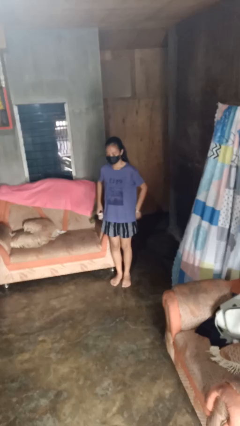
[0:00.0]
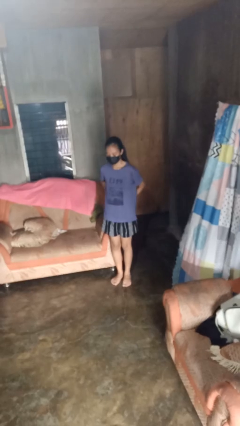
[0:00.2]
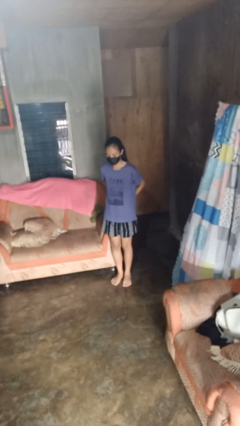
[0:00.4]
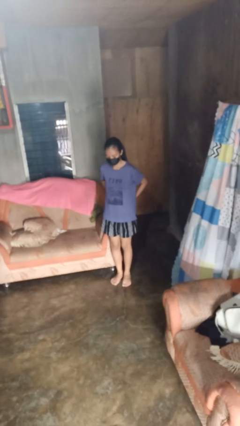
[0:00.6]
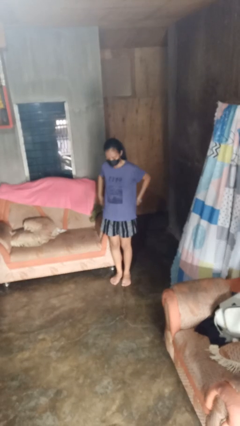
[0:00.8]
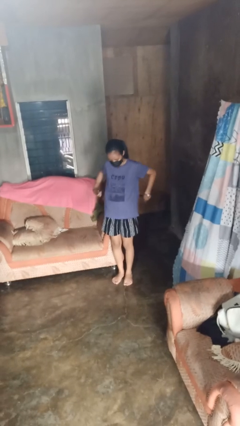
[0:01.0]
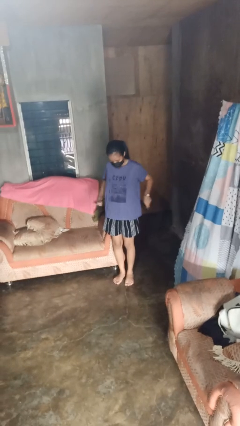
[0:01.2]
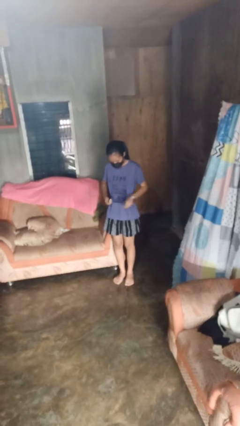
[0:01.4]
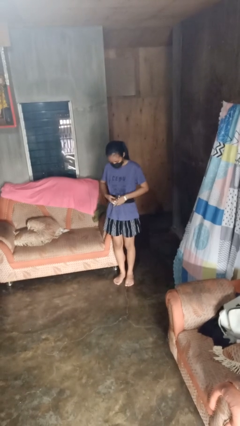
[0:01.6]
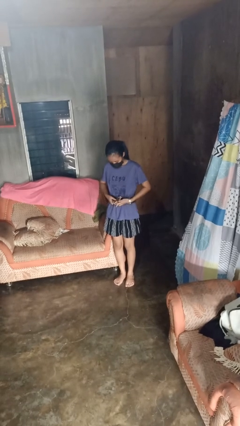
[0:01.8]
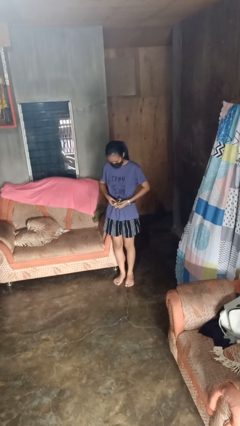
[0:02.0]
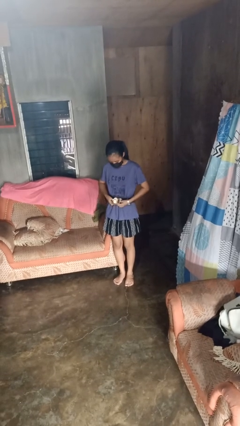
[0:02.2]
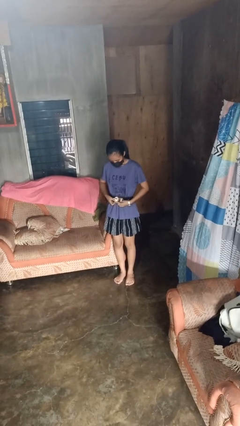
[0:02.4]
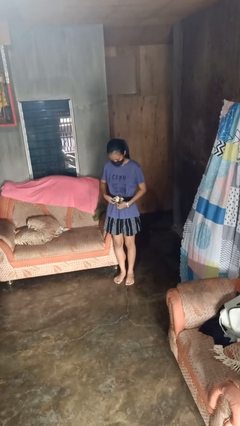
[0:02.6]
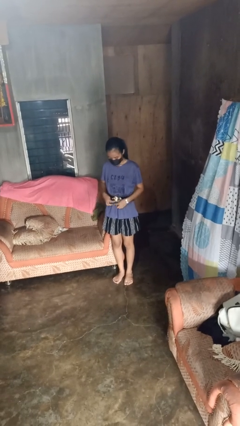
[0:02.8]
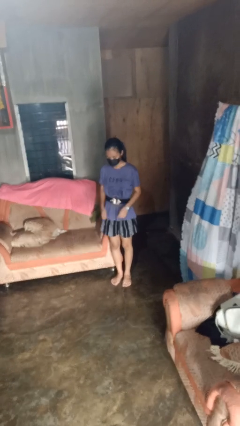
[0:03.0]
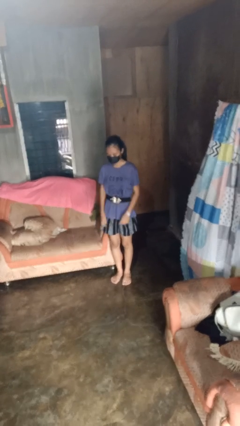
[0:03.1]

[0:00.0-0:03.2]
person puts on belt

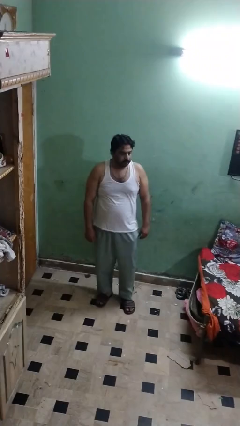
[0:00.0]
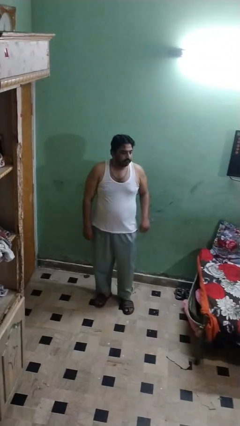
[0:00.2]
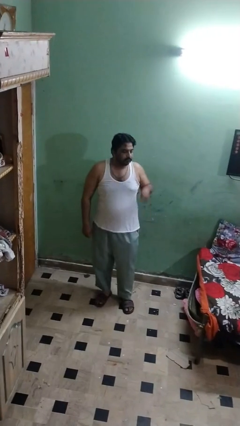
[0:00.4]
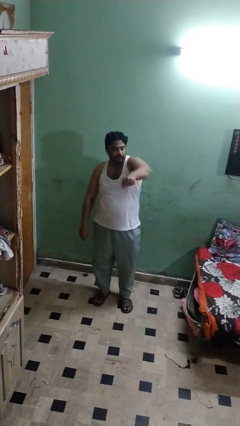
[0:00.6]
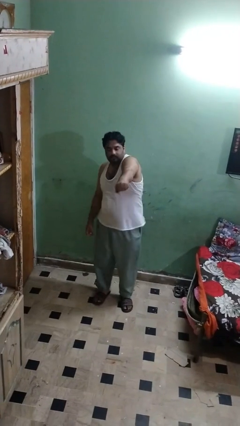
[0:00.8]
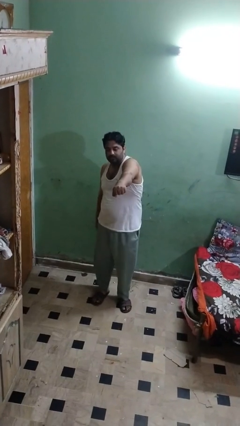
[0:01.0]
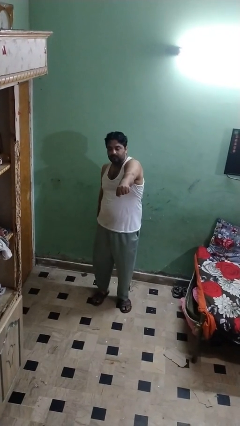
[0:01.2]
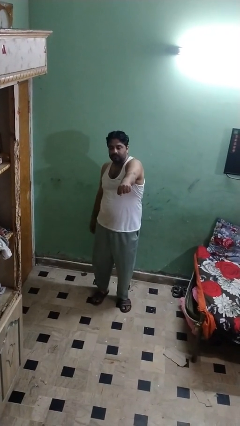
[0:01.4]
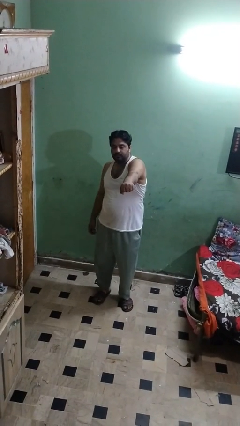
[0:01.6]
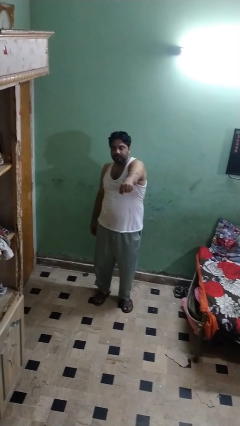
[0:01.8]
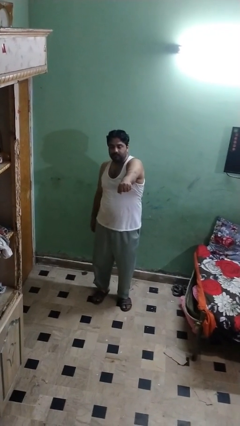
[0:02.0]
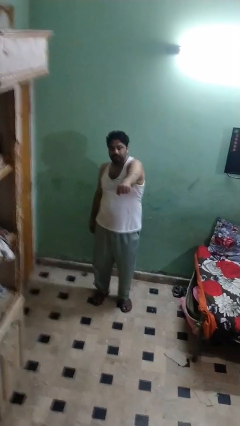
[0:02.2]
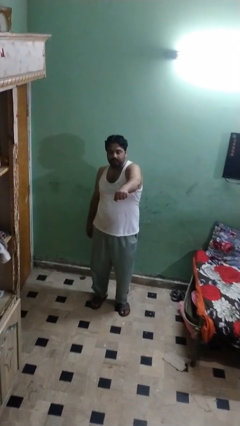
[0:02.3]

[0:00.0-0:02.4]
person punches

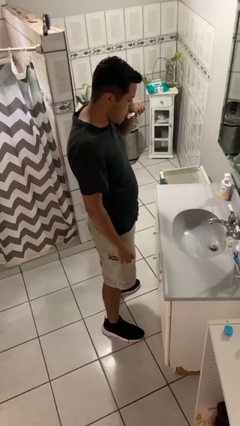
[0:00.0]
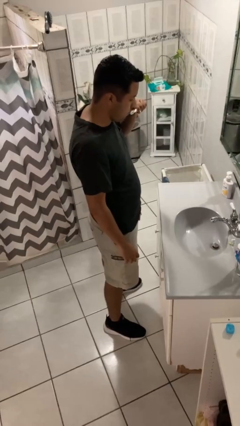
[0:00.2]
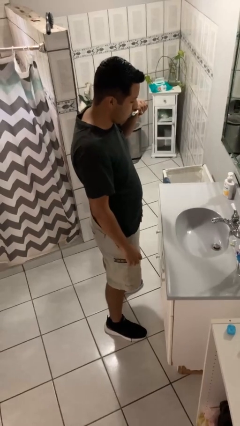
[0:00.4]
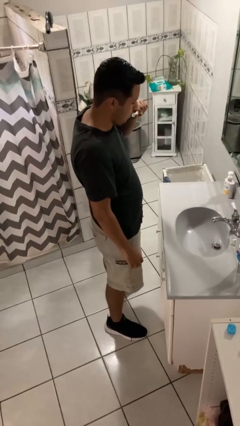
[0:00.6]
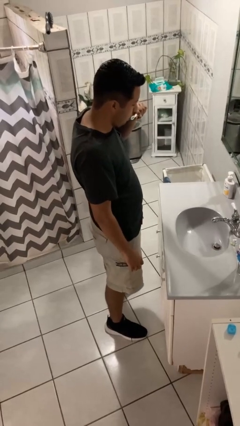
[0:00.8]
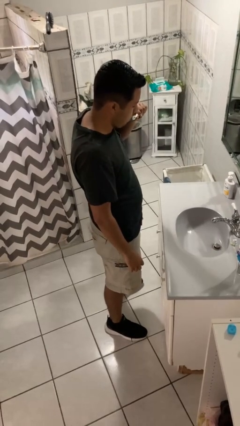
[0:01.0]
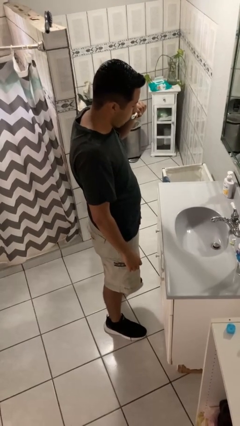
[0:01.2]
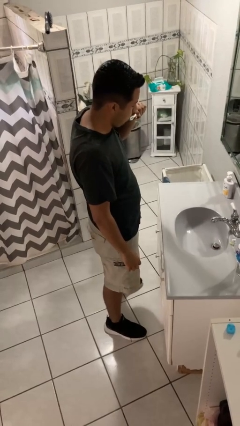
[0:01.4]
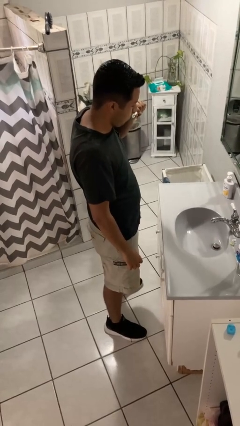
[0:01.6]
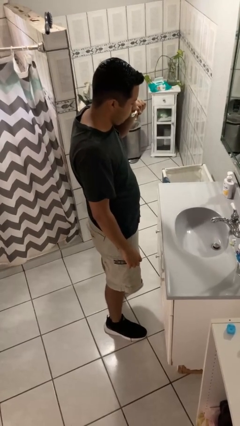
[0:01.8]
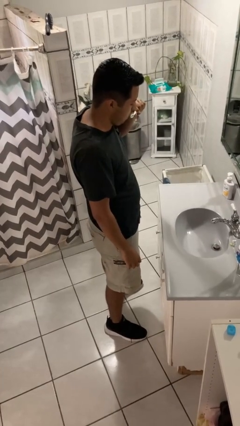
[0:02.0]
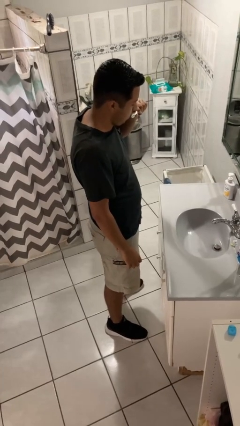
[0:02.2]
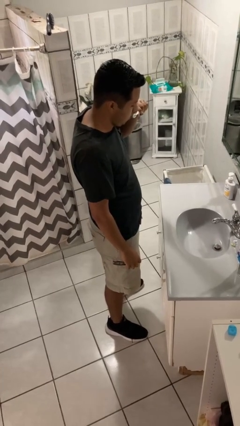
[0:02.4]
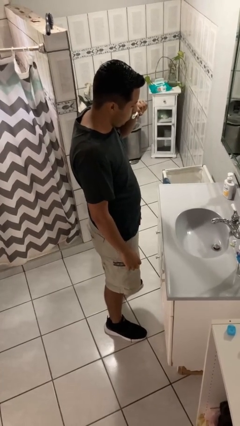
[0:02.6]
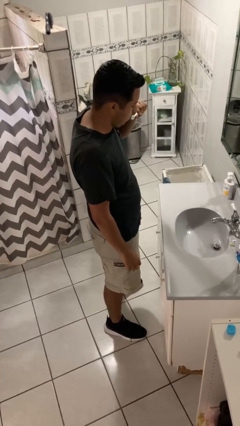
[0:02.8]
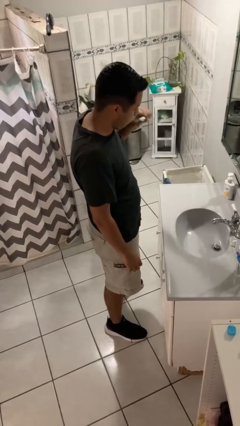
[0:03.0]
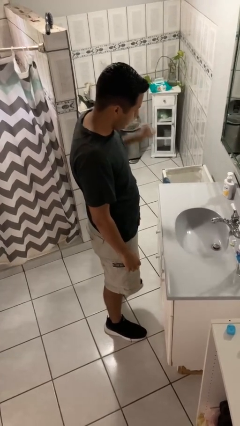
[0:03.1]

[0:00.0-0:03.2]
person brushes teeth

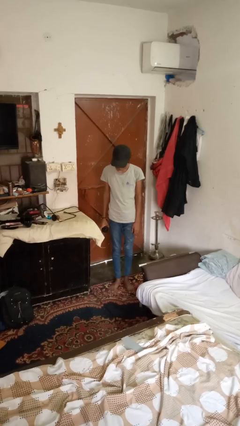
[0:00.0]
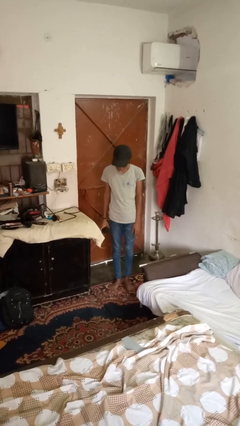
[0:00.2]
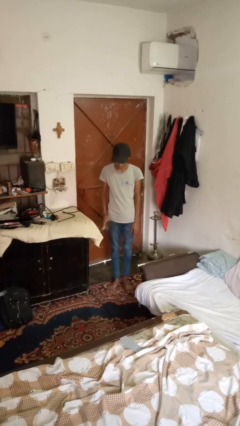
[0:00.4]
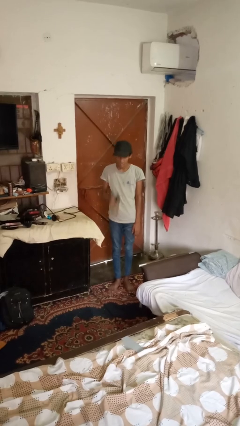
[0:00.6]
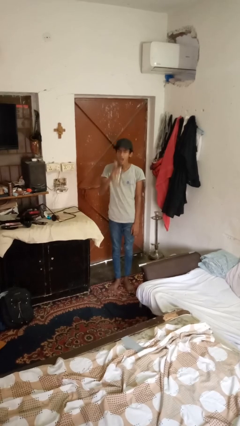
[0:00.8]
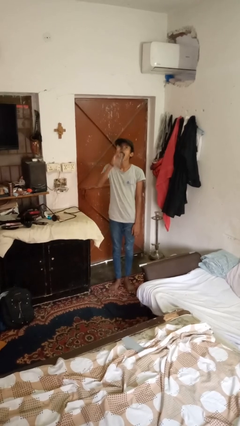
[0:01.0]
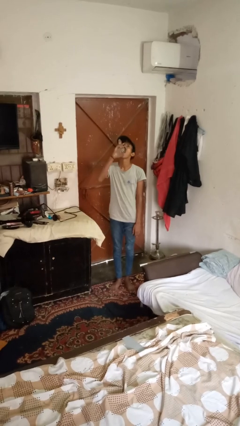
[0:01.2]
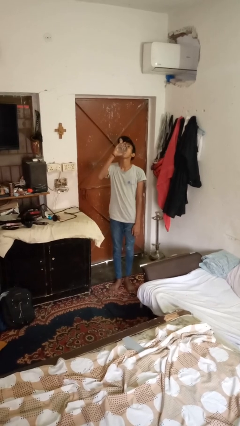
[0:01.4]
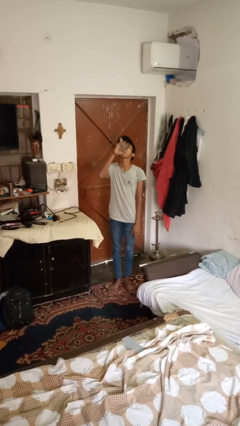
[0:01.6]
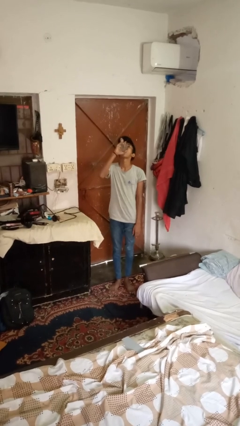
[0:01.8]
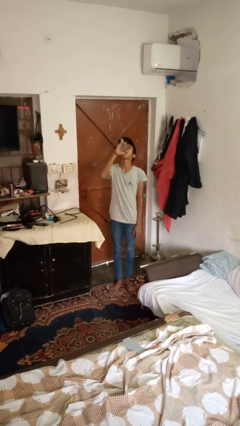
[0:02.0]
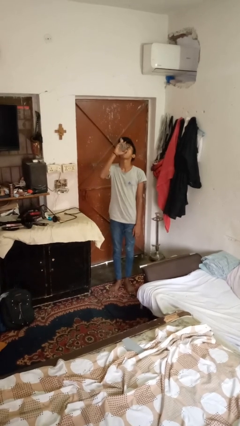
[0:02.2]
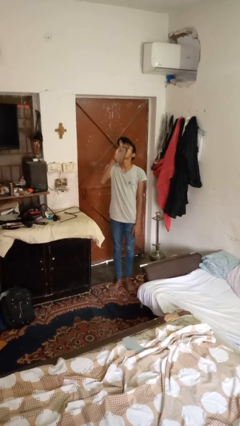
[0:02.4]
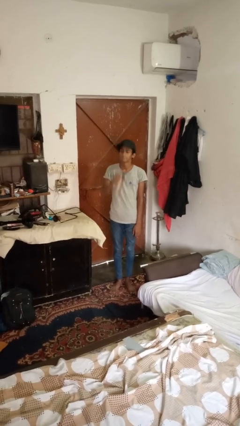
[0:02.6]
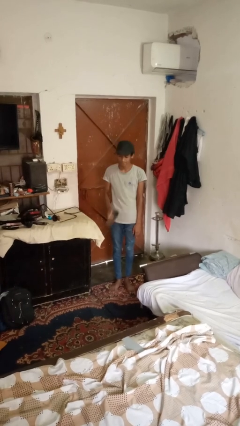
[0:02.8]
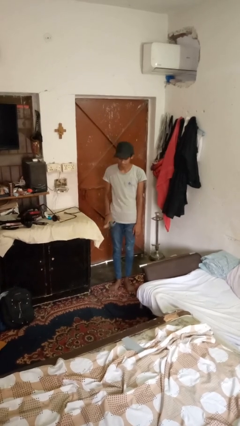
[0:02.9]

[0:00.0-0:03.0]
person drinks from bottle

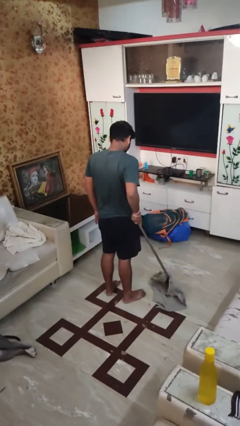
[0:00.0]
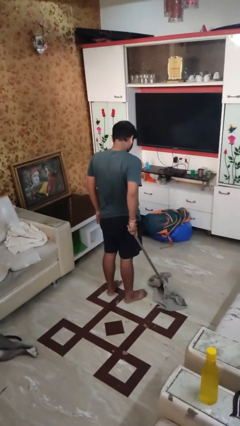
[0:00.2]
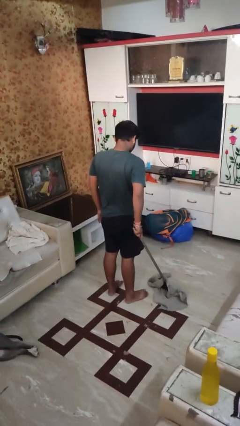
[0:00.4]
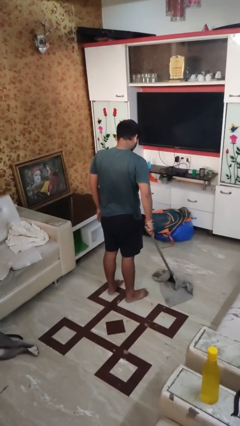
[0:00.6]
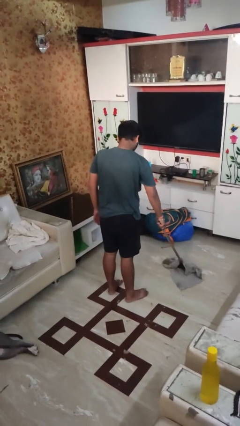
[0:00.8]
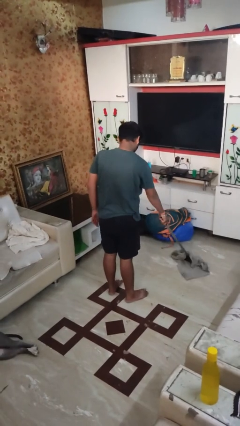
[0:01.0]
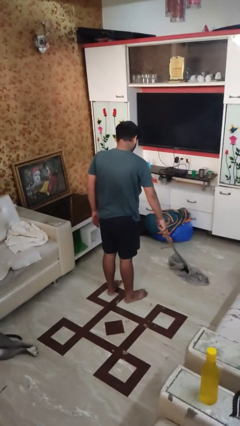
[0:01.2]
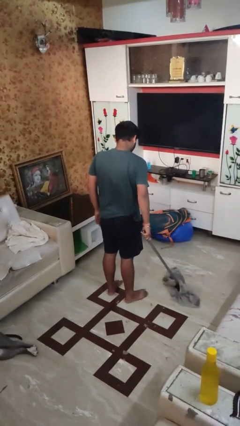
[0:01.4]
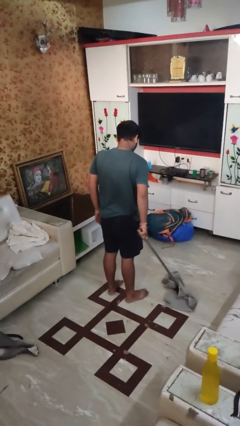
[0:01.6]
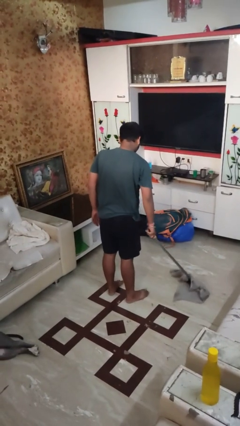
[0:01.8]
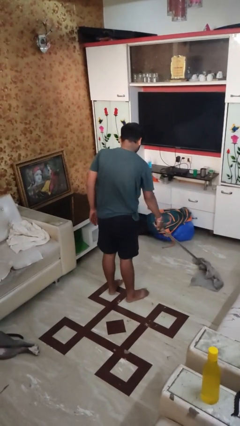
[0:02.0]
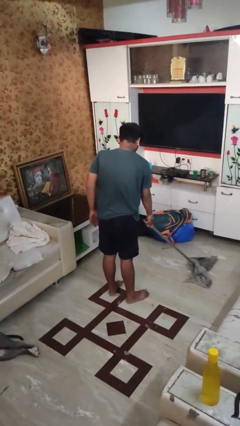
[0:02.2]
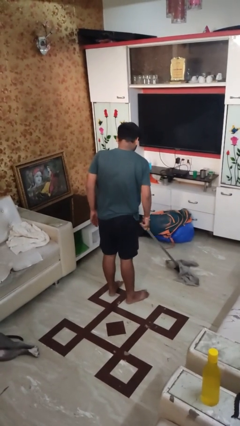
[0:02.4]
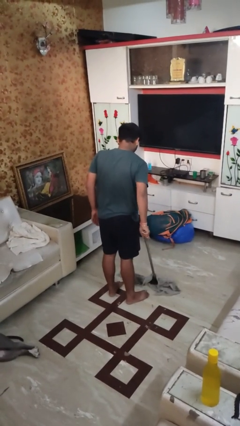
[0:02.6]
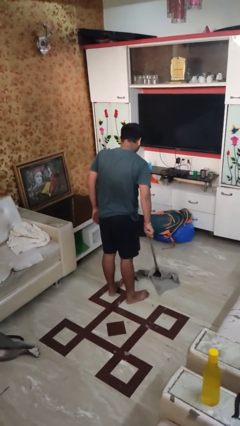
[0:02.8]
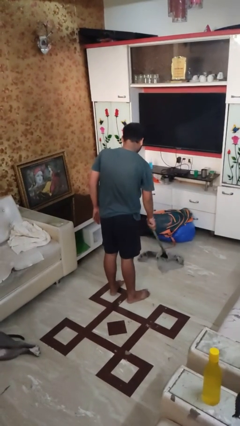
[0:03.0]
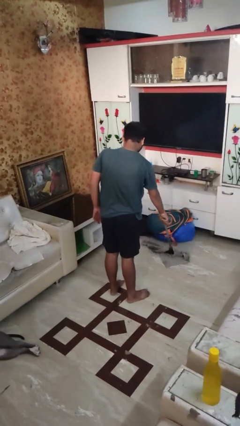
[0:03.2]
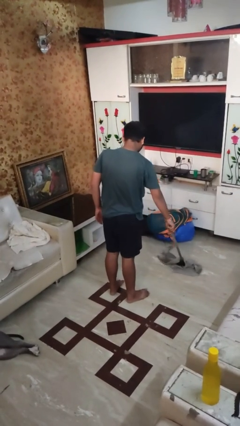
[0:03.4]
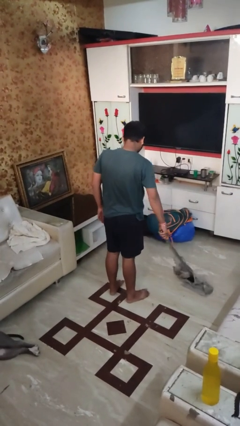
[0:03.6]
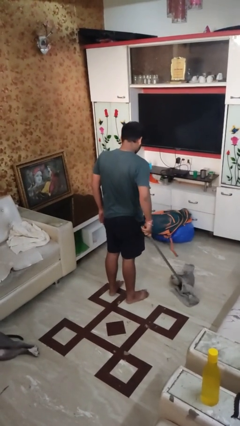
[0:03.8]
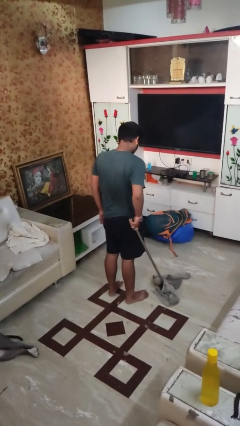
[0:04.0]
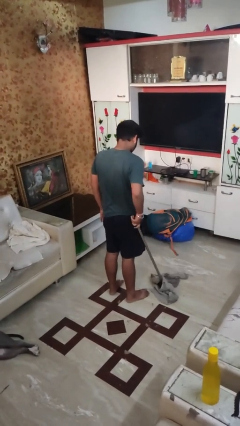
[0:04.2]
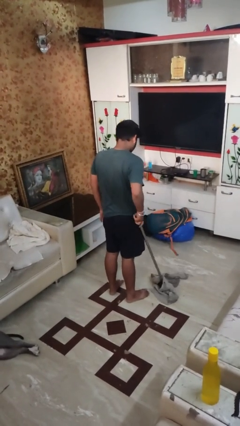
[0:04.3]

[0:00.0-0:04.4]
person mops

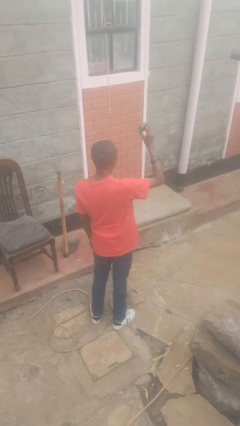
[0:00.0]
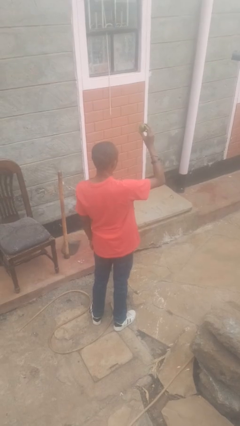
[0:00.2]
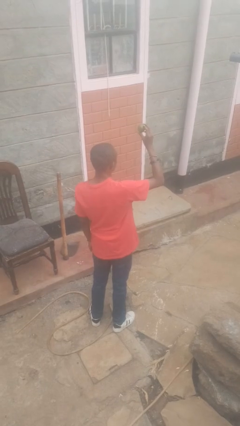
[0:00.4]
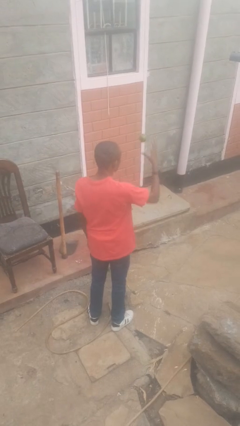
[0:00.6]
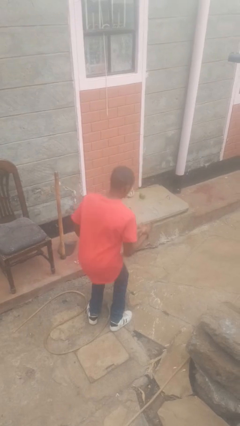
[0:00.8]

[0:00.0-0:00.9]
person drops object

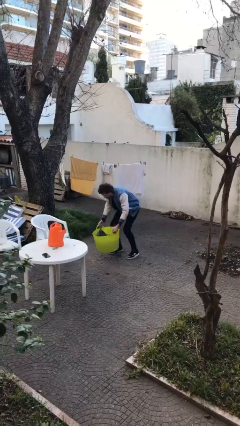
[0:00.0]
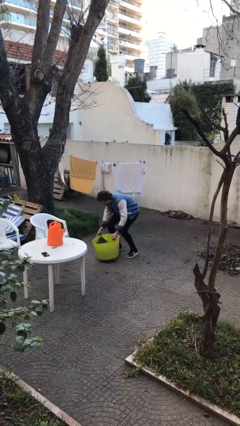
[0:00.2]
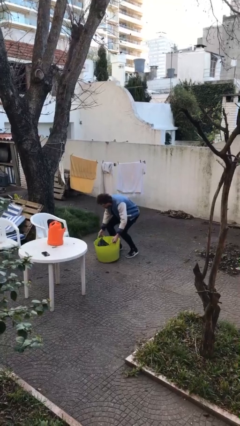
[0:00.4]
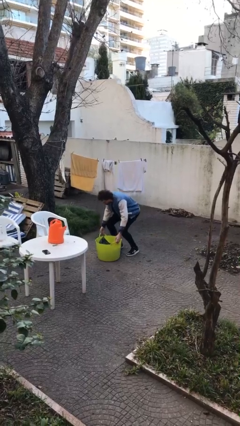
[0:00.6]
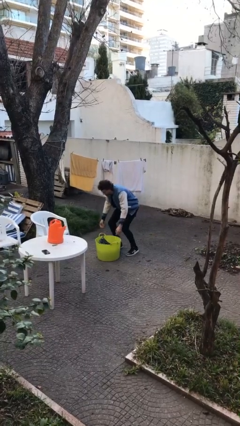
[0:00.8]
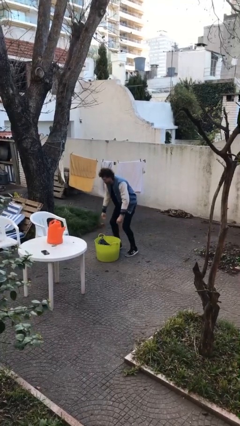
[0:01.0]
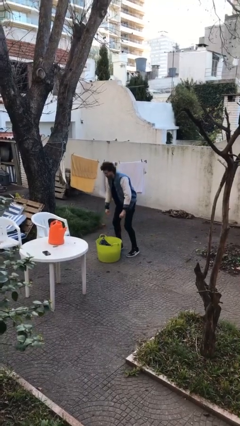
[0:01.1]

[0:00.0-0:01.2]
person puts down object on floor
